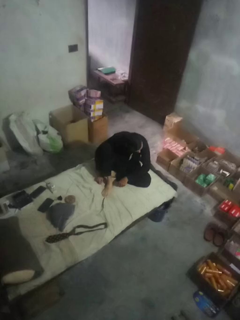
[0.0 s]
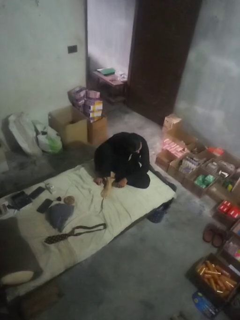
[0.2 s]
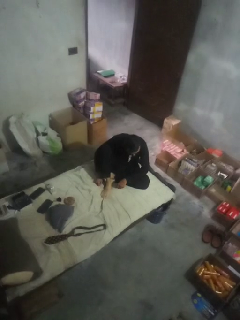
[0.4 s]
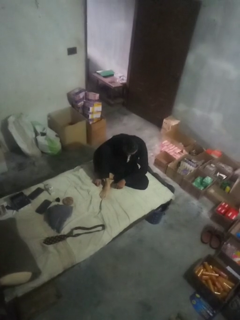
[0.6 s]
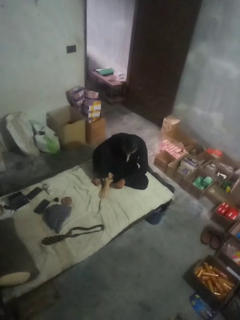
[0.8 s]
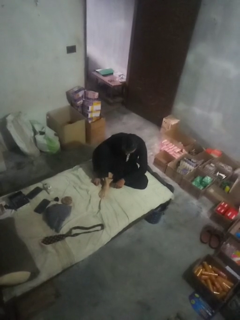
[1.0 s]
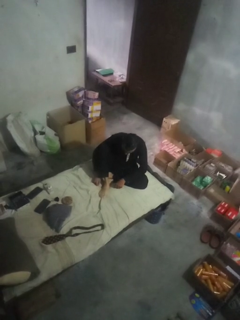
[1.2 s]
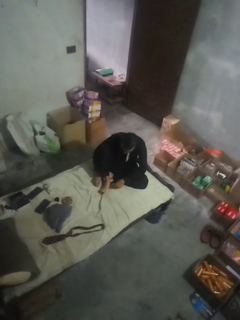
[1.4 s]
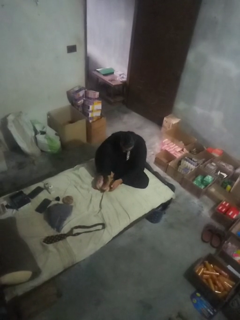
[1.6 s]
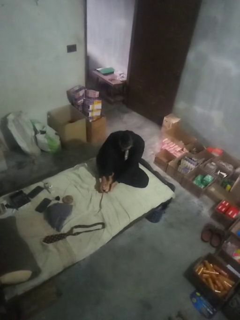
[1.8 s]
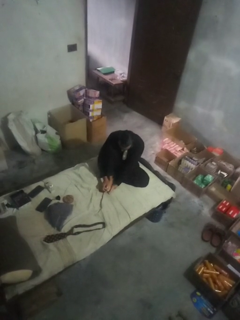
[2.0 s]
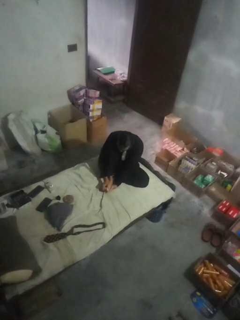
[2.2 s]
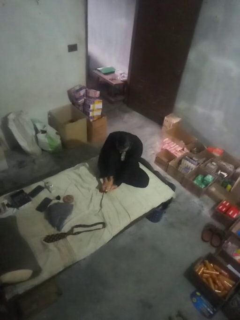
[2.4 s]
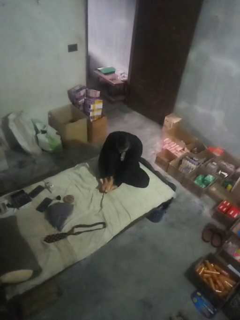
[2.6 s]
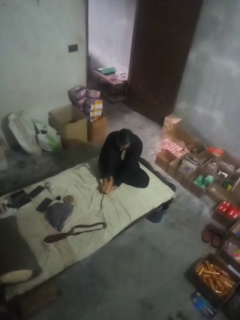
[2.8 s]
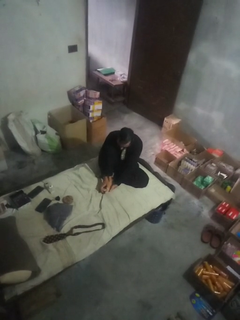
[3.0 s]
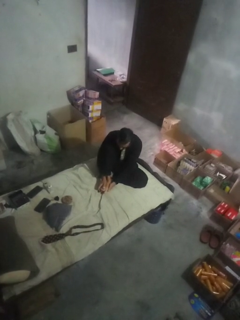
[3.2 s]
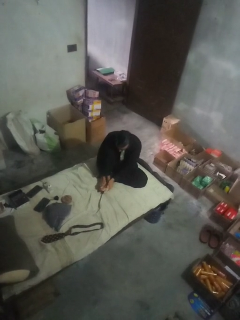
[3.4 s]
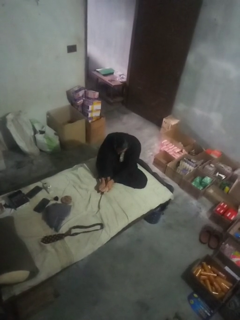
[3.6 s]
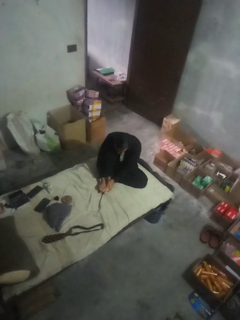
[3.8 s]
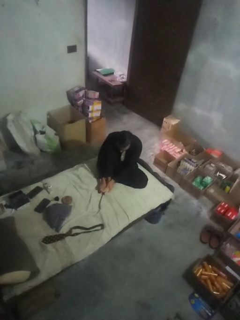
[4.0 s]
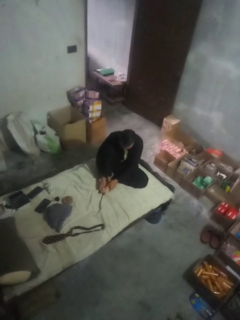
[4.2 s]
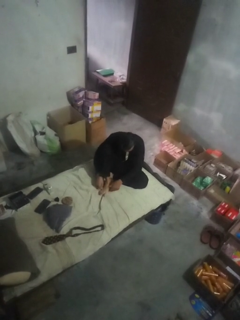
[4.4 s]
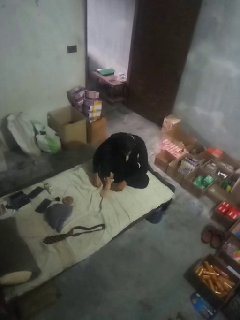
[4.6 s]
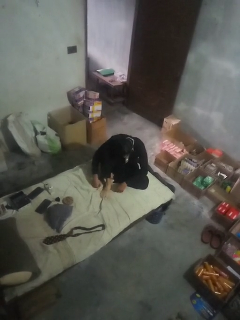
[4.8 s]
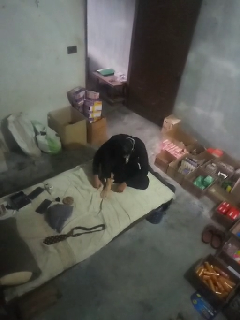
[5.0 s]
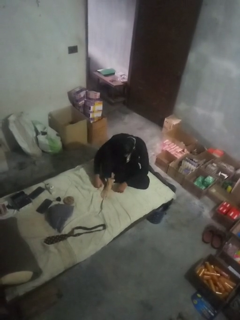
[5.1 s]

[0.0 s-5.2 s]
person rubs foot

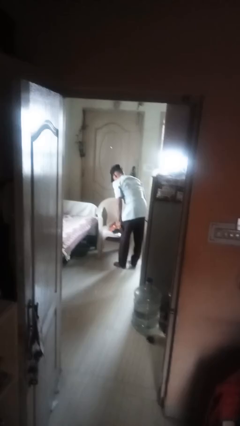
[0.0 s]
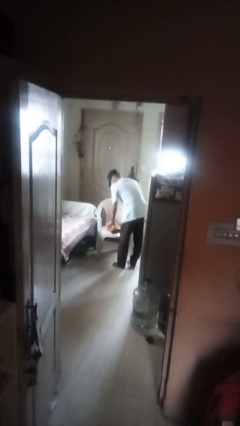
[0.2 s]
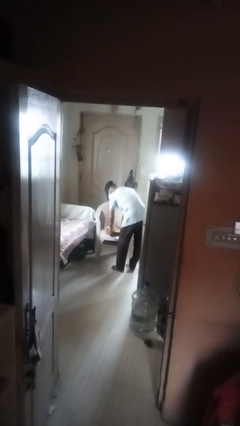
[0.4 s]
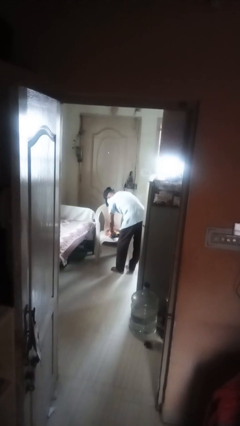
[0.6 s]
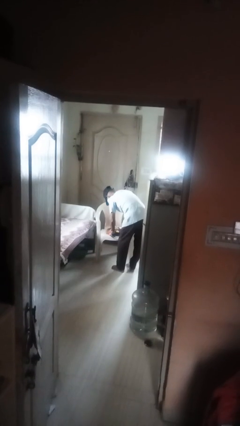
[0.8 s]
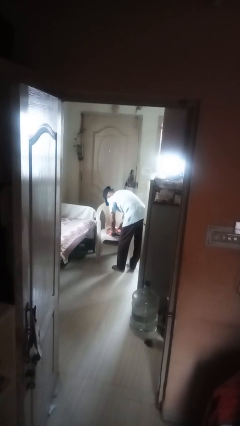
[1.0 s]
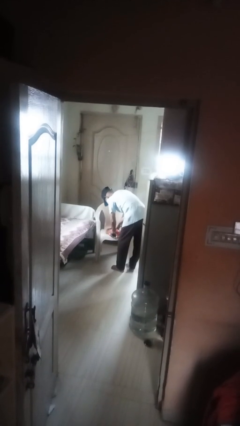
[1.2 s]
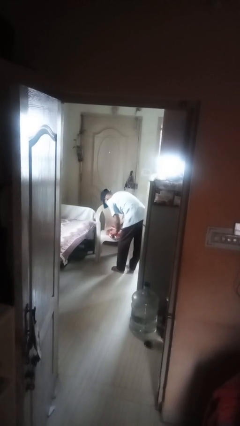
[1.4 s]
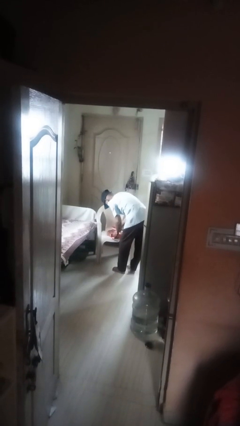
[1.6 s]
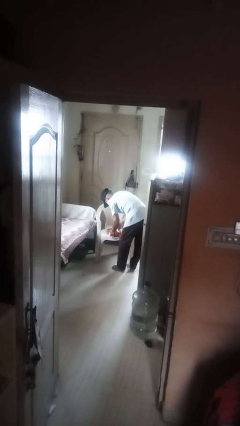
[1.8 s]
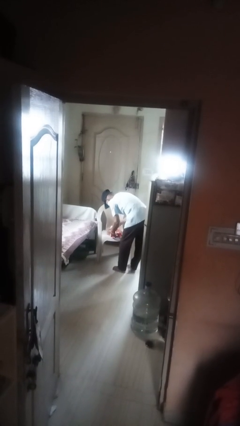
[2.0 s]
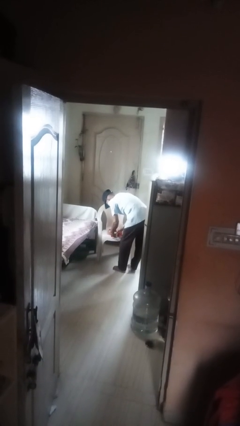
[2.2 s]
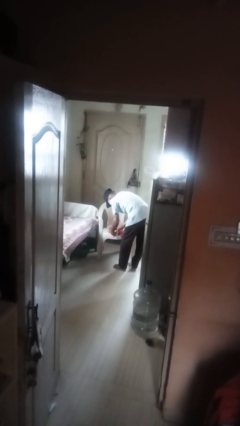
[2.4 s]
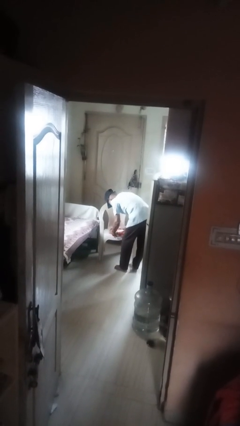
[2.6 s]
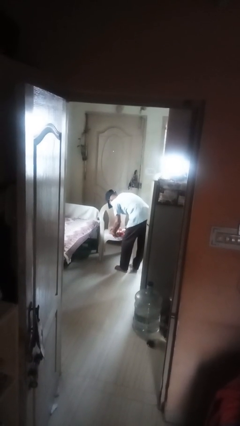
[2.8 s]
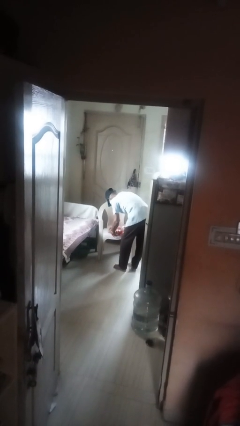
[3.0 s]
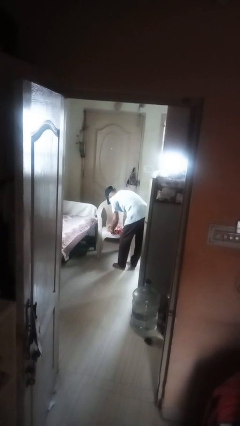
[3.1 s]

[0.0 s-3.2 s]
person wraps box

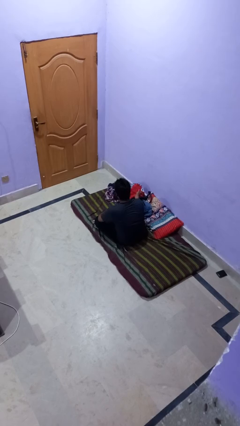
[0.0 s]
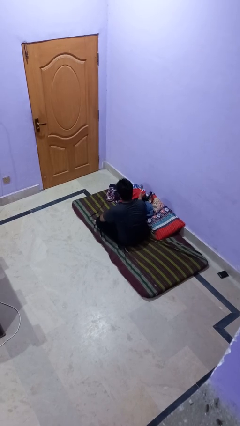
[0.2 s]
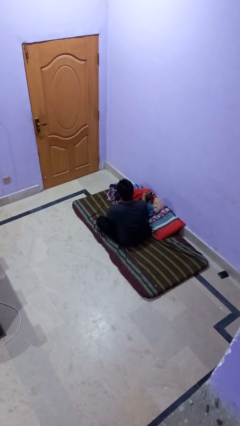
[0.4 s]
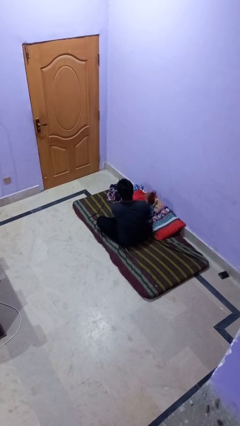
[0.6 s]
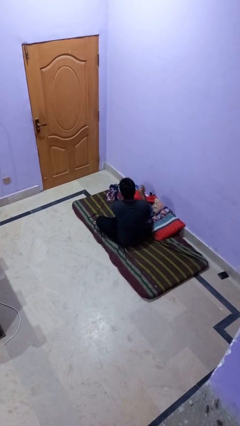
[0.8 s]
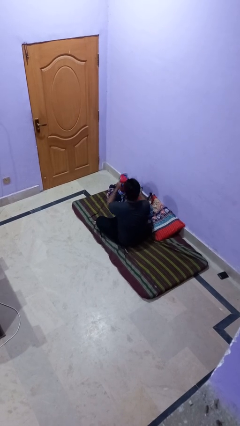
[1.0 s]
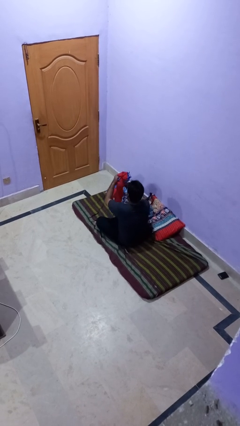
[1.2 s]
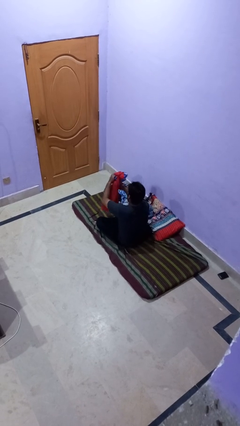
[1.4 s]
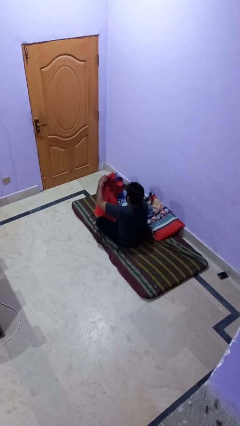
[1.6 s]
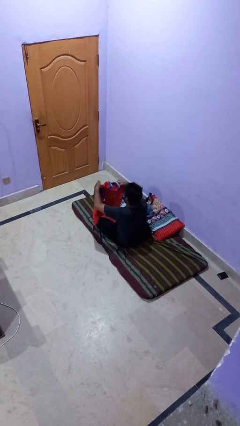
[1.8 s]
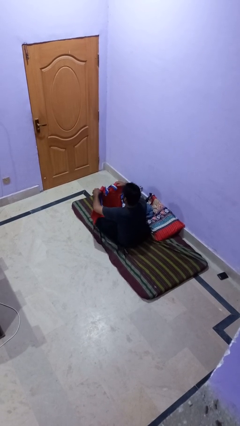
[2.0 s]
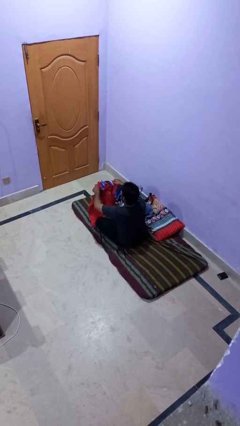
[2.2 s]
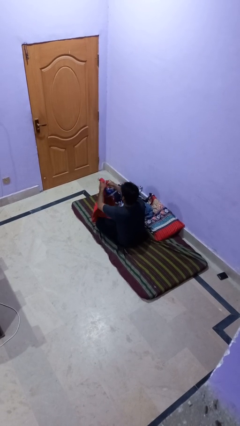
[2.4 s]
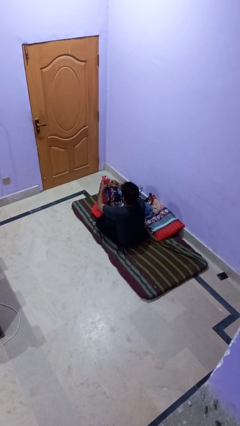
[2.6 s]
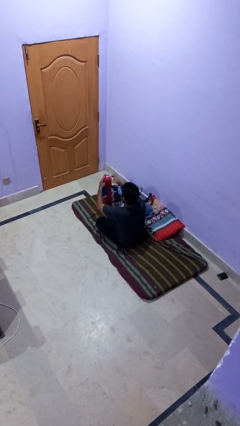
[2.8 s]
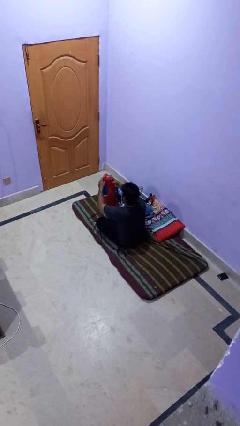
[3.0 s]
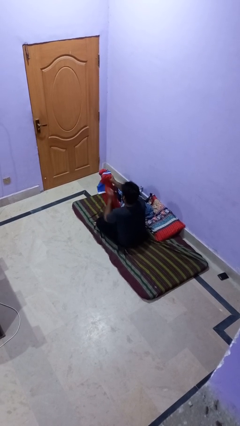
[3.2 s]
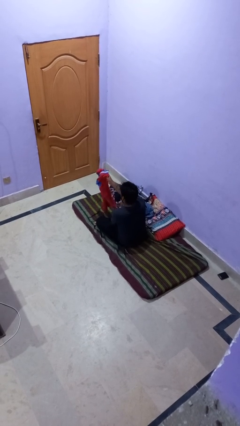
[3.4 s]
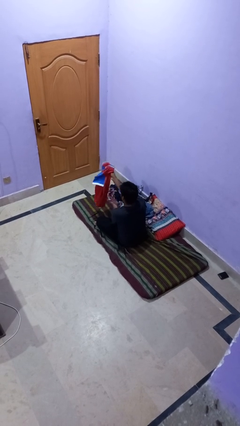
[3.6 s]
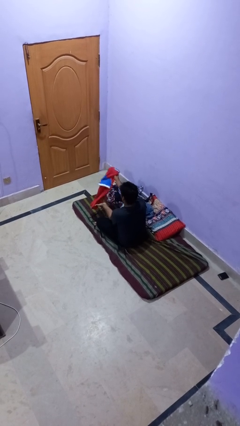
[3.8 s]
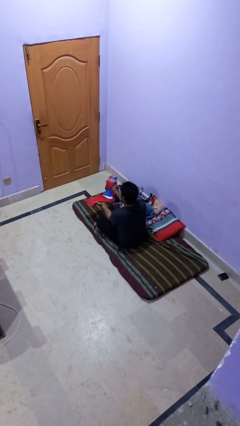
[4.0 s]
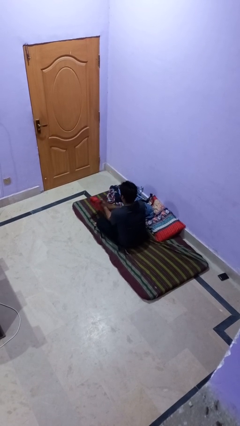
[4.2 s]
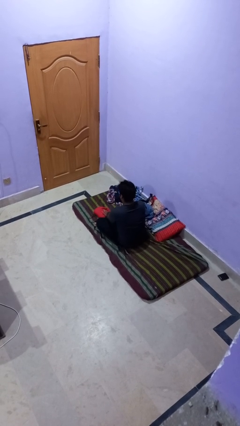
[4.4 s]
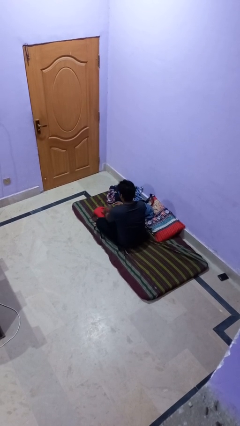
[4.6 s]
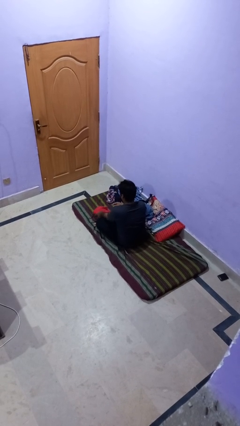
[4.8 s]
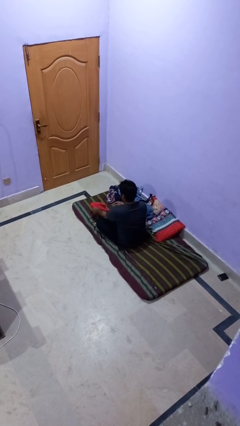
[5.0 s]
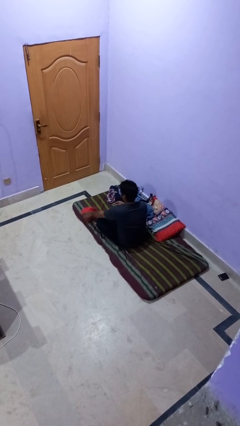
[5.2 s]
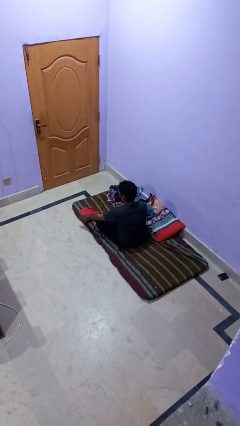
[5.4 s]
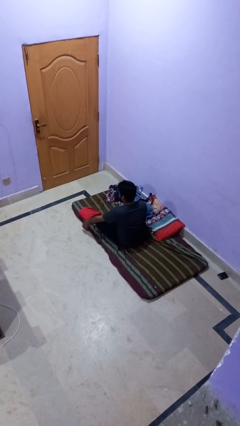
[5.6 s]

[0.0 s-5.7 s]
person folds shirt

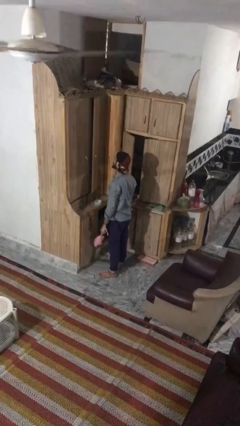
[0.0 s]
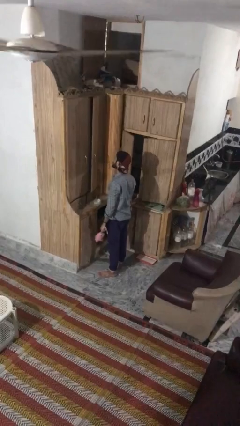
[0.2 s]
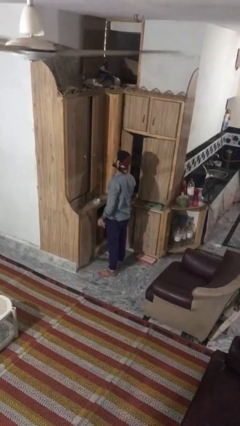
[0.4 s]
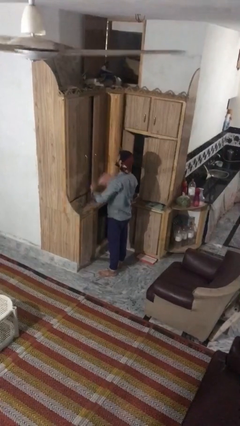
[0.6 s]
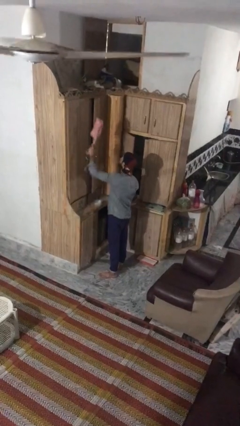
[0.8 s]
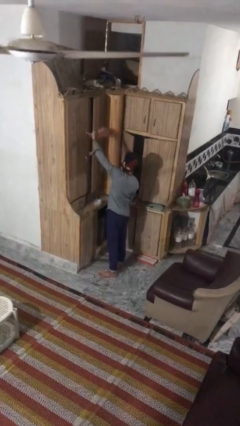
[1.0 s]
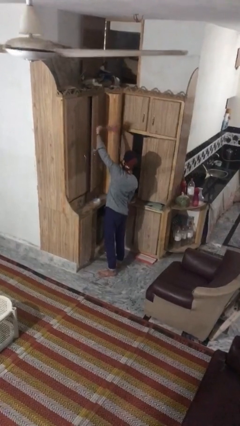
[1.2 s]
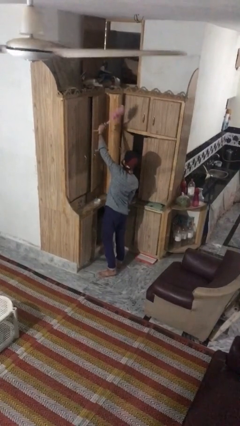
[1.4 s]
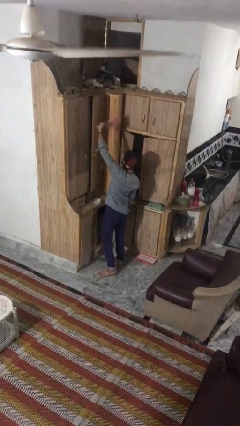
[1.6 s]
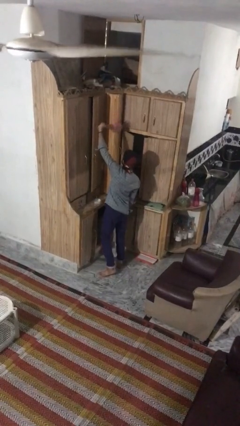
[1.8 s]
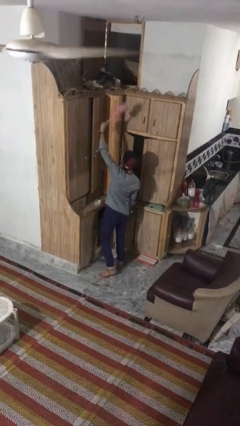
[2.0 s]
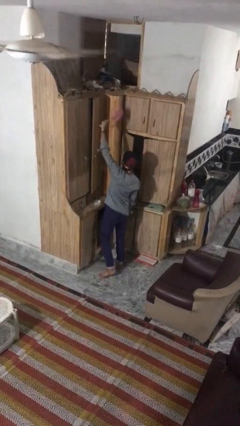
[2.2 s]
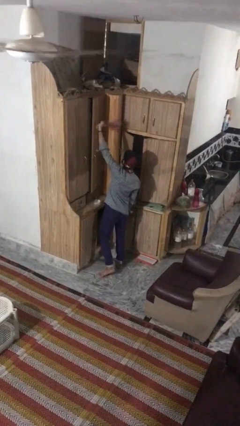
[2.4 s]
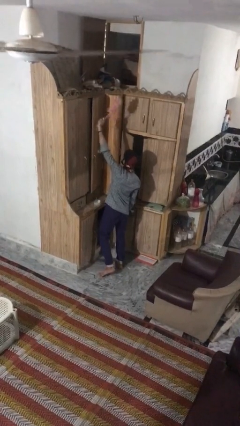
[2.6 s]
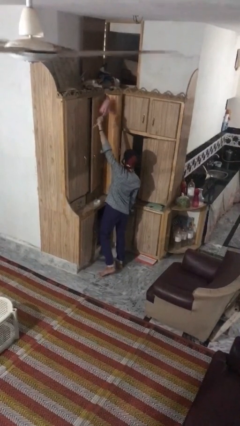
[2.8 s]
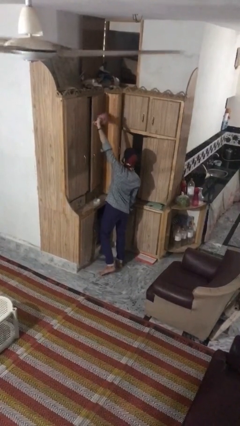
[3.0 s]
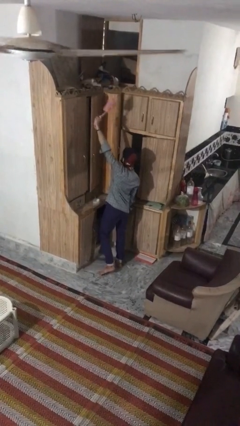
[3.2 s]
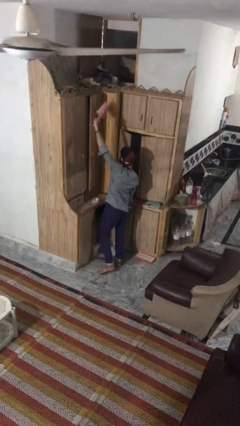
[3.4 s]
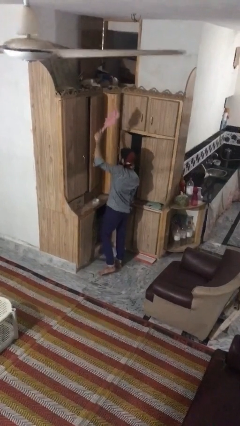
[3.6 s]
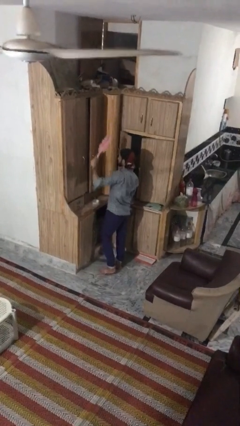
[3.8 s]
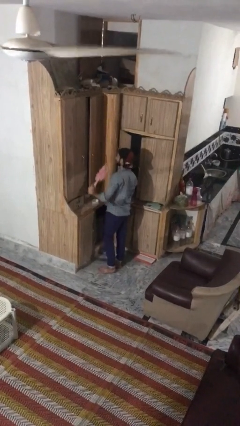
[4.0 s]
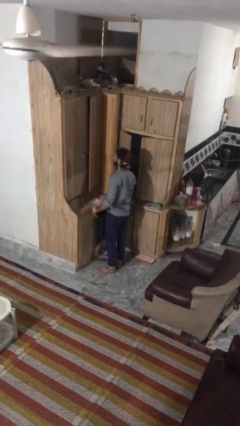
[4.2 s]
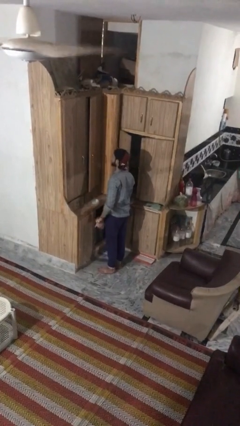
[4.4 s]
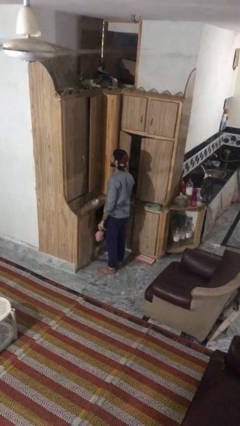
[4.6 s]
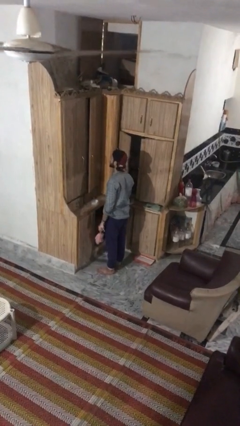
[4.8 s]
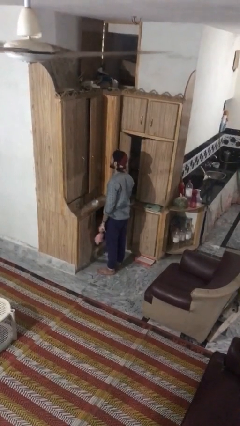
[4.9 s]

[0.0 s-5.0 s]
person dusts furniture
